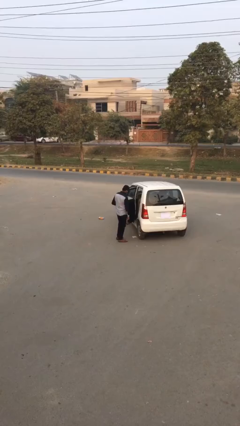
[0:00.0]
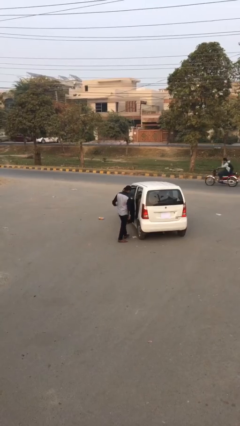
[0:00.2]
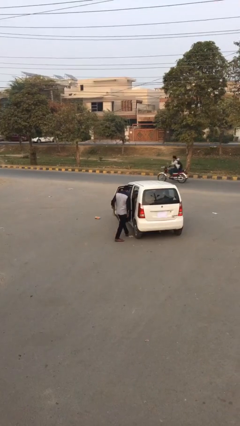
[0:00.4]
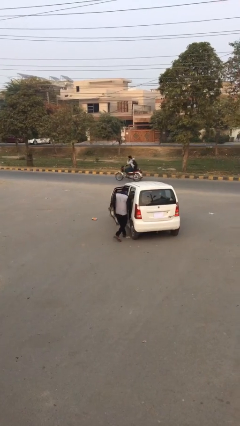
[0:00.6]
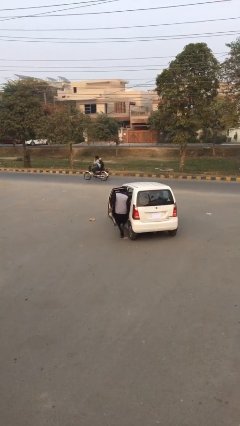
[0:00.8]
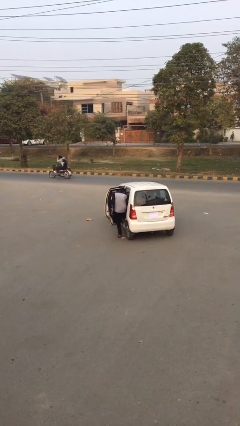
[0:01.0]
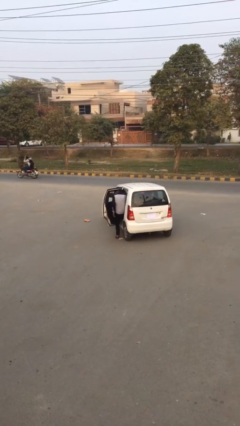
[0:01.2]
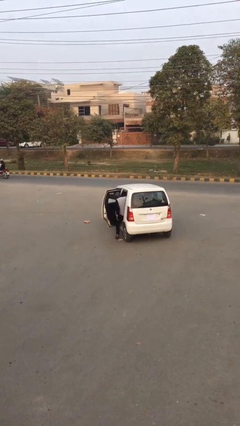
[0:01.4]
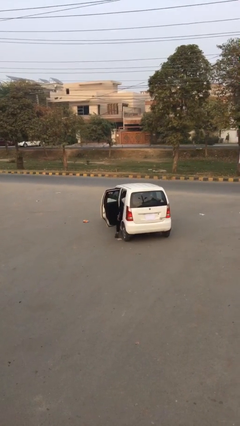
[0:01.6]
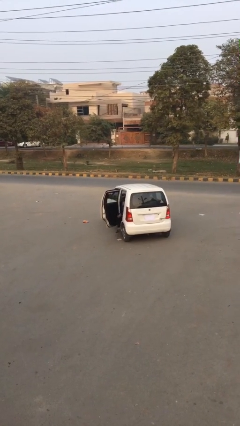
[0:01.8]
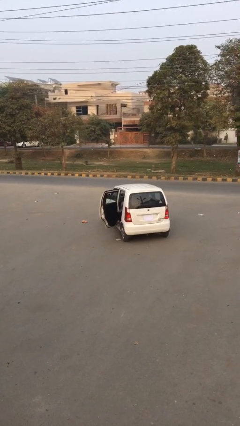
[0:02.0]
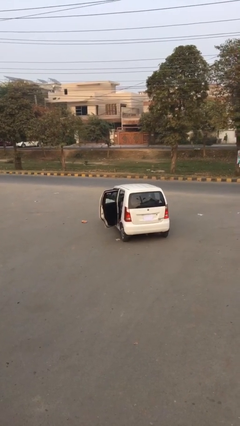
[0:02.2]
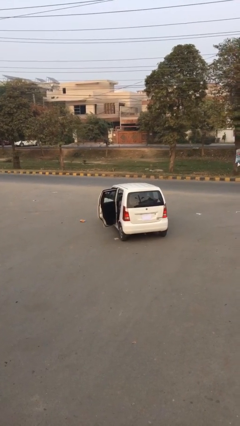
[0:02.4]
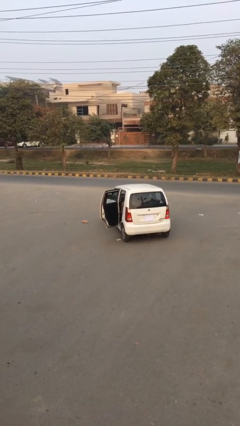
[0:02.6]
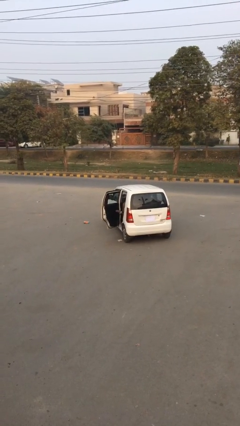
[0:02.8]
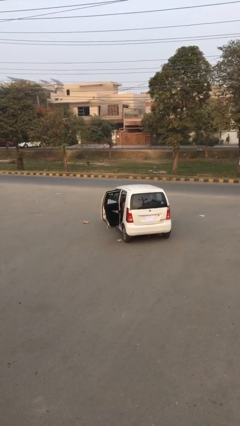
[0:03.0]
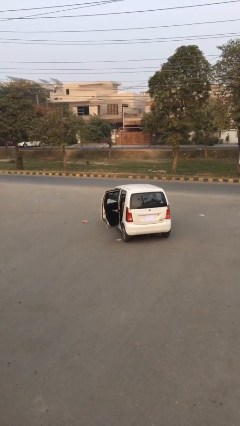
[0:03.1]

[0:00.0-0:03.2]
person enters car

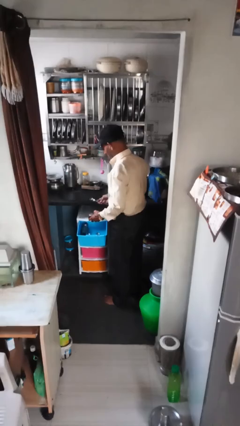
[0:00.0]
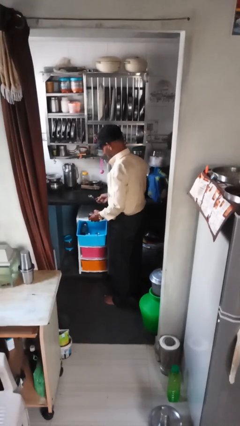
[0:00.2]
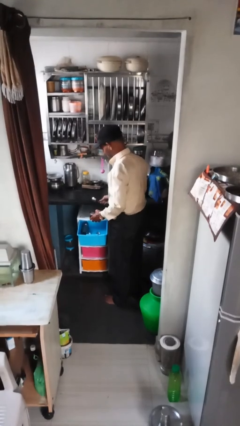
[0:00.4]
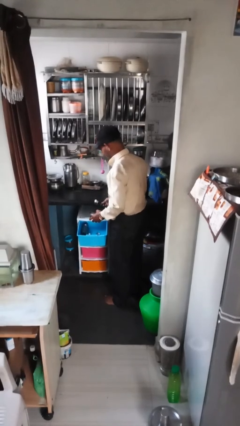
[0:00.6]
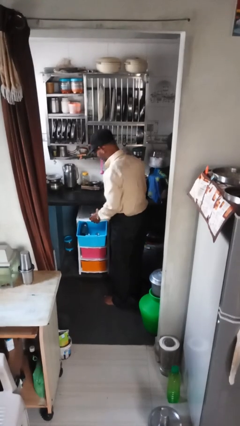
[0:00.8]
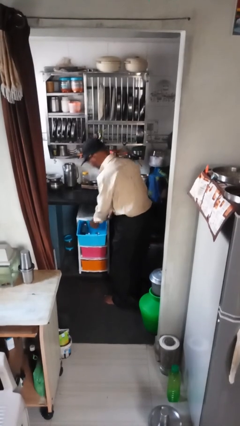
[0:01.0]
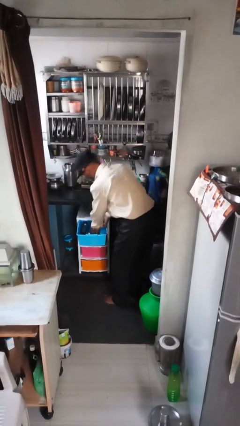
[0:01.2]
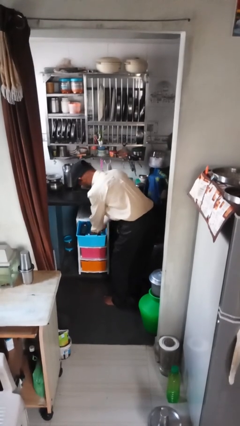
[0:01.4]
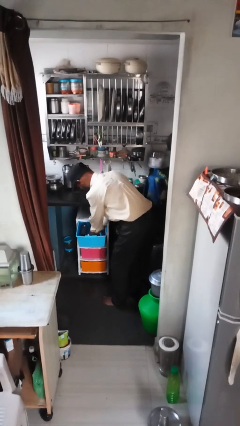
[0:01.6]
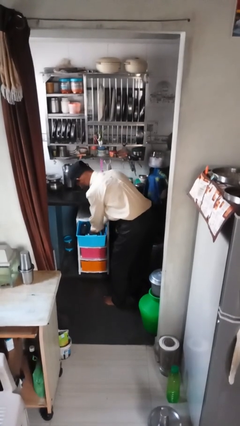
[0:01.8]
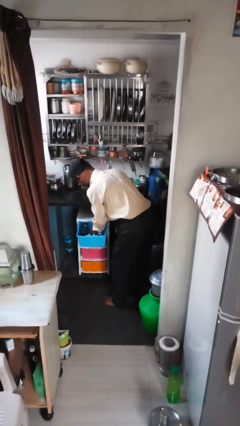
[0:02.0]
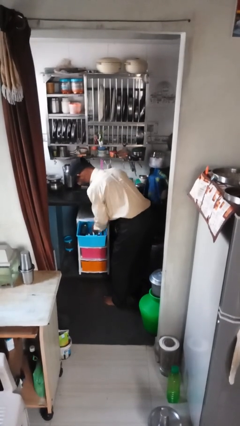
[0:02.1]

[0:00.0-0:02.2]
person puts object into kitchen drawer

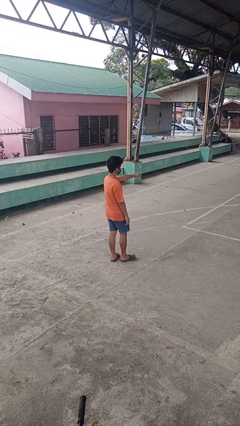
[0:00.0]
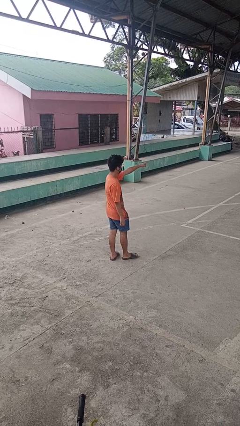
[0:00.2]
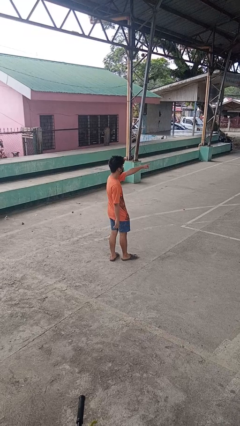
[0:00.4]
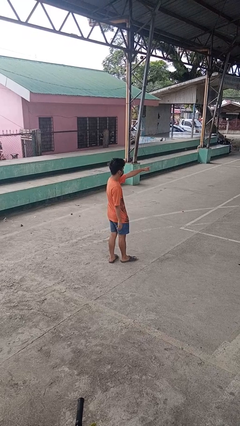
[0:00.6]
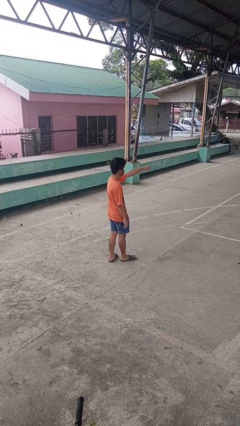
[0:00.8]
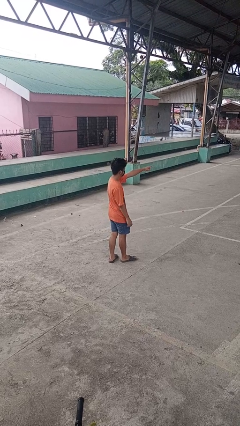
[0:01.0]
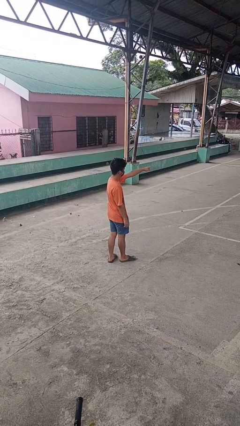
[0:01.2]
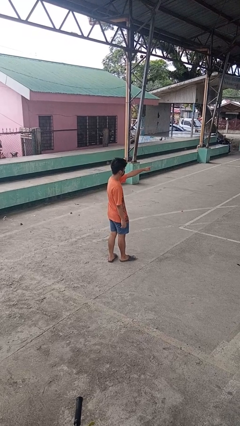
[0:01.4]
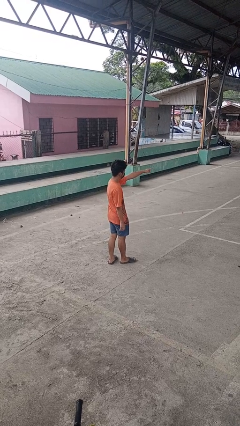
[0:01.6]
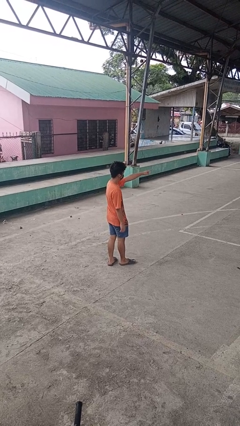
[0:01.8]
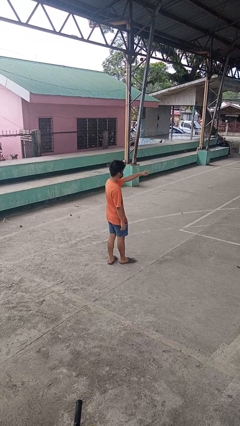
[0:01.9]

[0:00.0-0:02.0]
person points at person

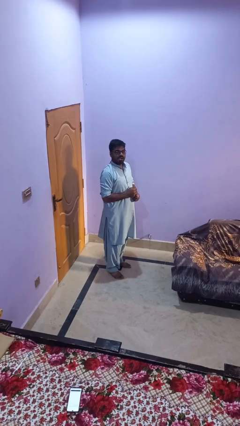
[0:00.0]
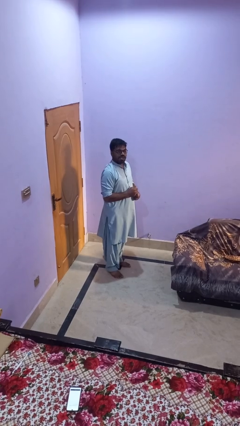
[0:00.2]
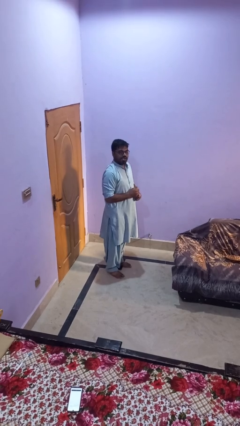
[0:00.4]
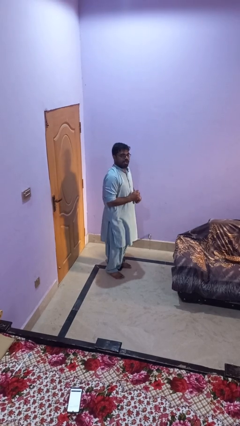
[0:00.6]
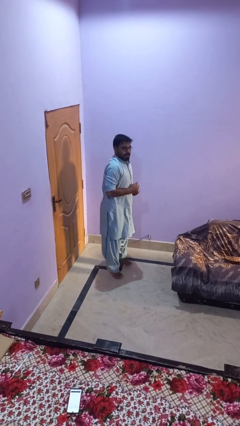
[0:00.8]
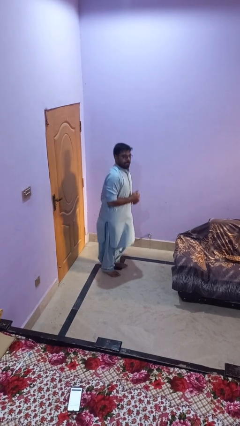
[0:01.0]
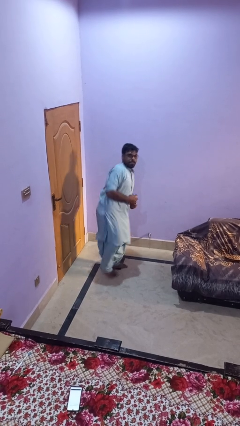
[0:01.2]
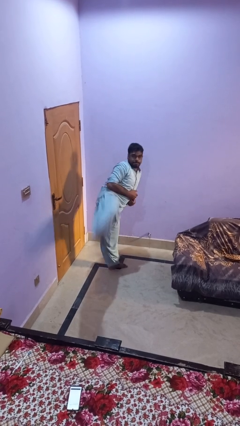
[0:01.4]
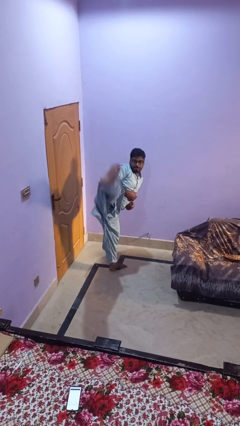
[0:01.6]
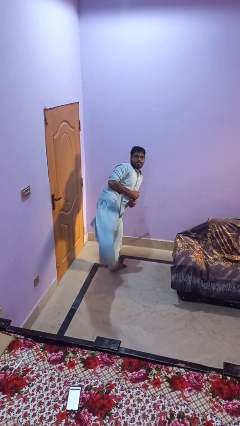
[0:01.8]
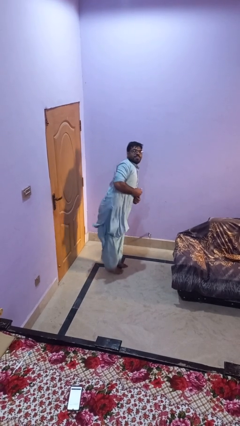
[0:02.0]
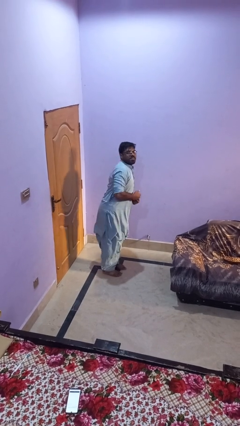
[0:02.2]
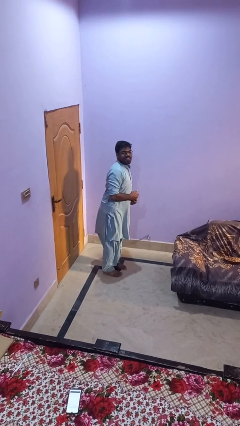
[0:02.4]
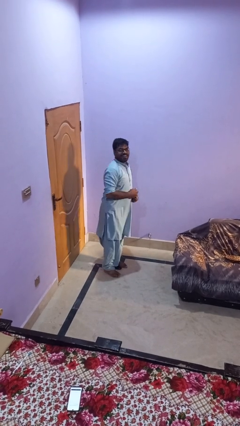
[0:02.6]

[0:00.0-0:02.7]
person karate kicks

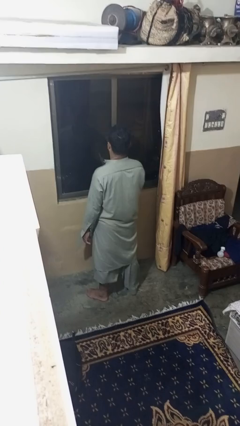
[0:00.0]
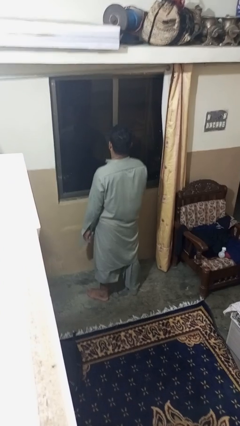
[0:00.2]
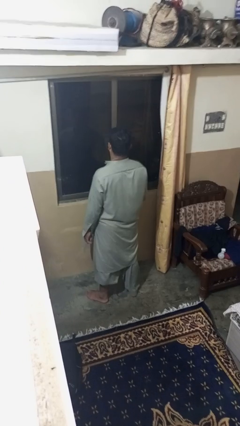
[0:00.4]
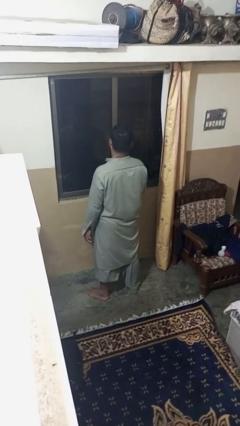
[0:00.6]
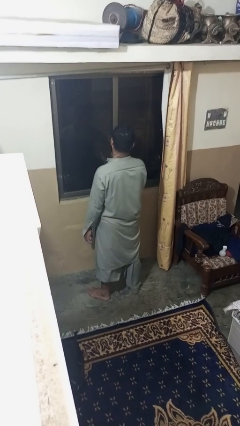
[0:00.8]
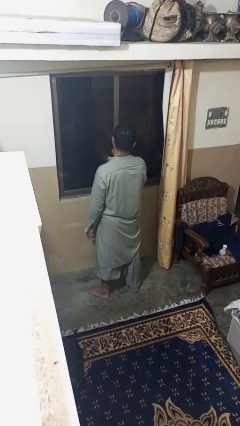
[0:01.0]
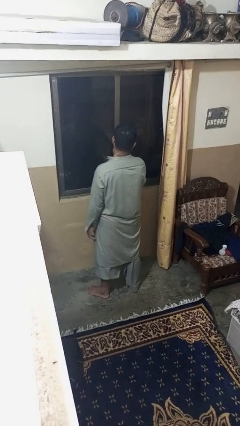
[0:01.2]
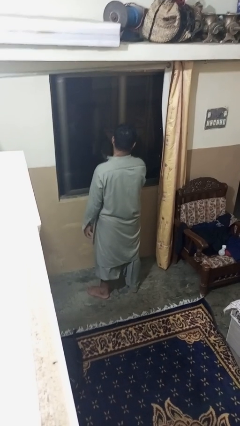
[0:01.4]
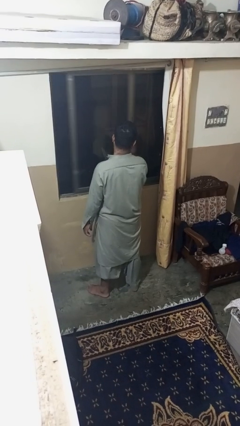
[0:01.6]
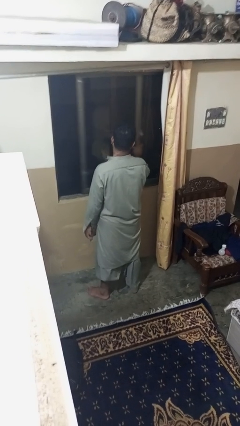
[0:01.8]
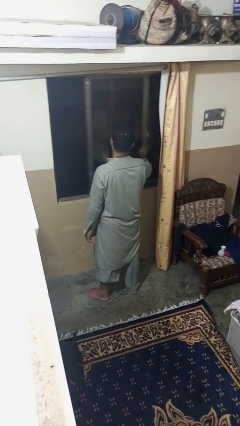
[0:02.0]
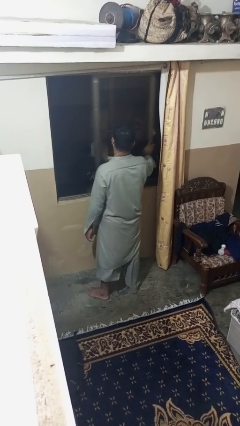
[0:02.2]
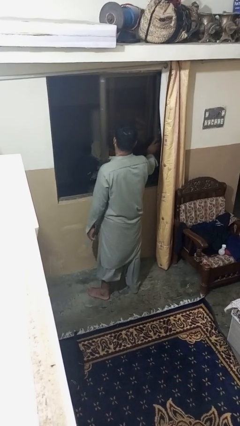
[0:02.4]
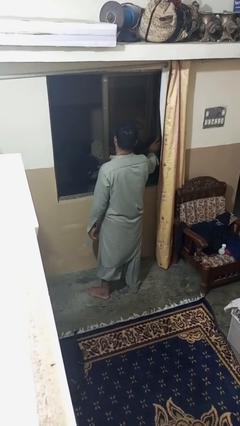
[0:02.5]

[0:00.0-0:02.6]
person opens home window

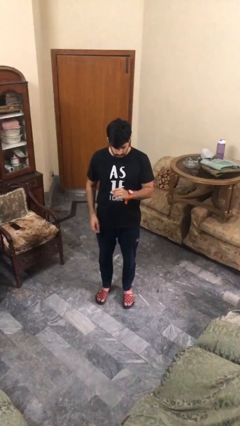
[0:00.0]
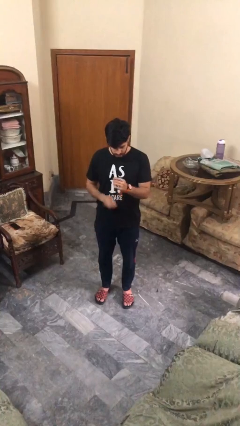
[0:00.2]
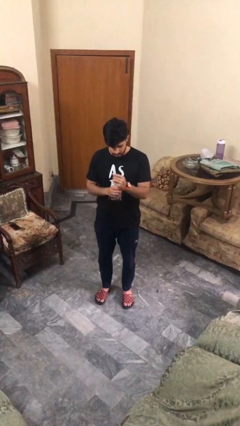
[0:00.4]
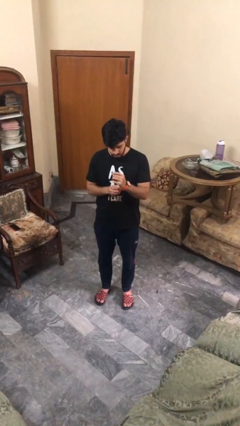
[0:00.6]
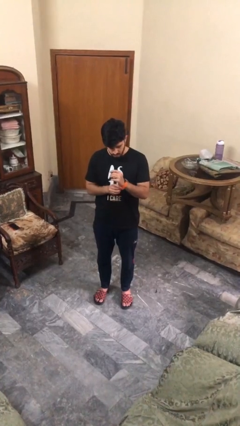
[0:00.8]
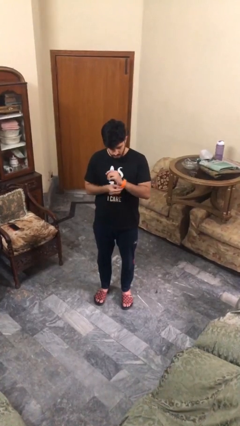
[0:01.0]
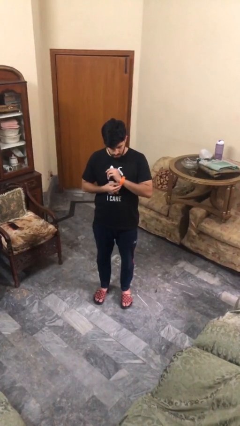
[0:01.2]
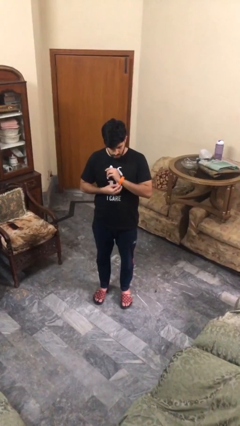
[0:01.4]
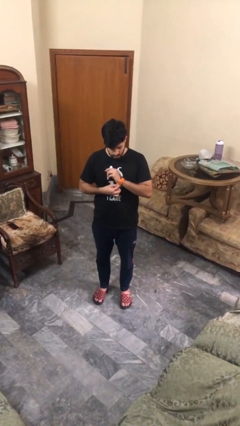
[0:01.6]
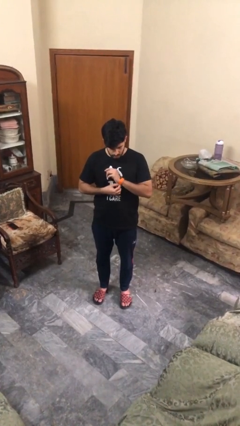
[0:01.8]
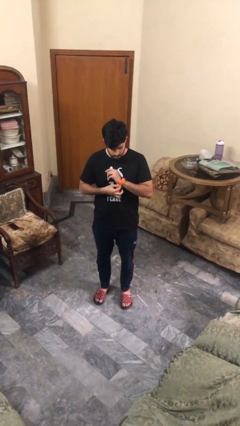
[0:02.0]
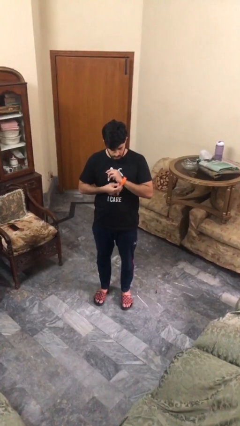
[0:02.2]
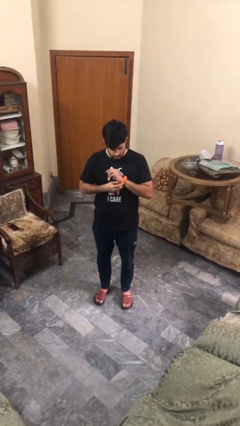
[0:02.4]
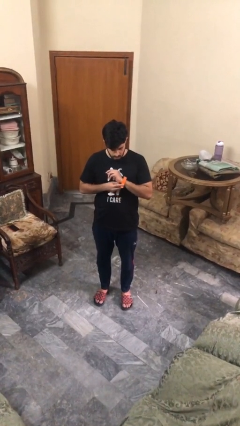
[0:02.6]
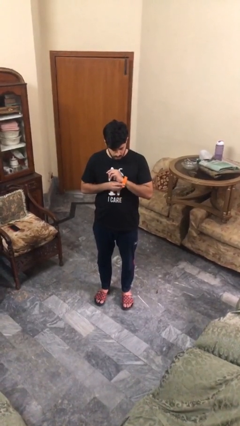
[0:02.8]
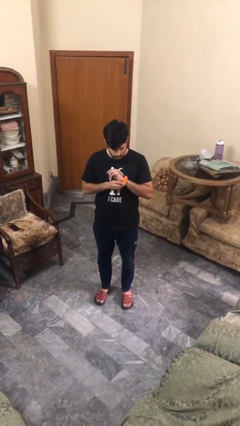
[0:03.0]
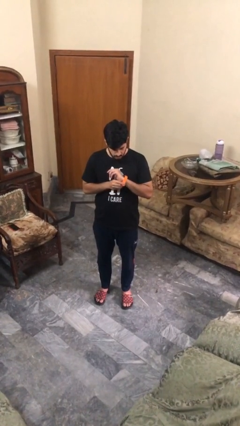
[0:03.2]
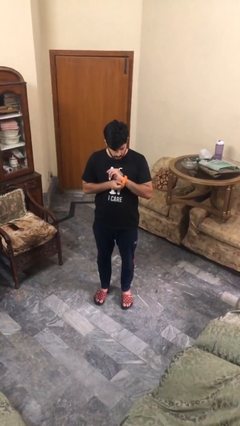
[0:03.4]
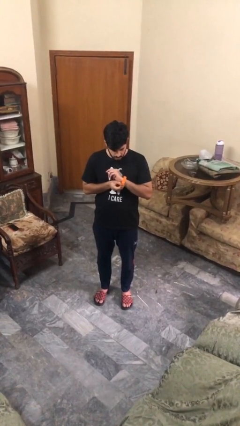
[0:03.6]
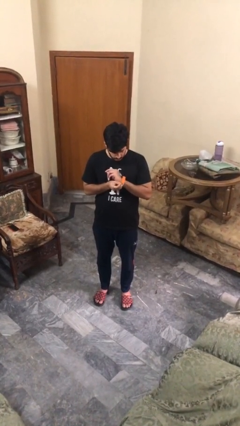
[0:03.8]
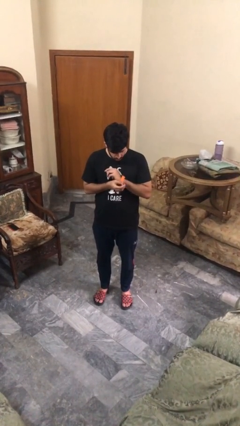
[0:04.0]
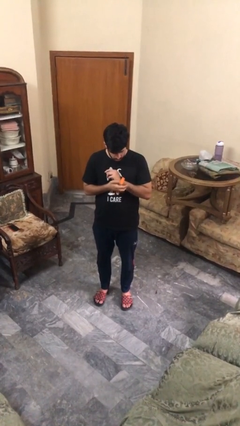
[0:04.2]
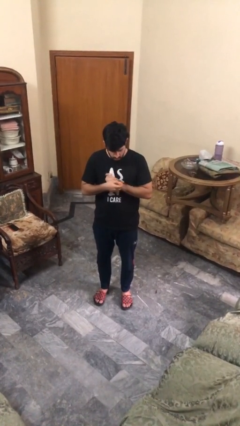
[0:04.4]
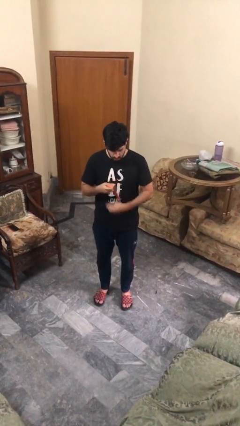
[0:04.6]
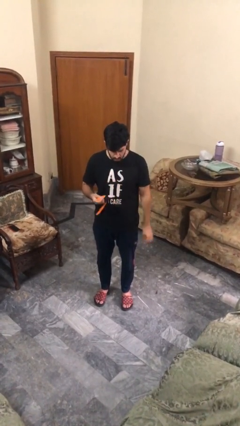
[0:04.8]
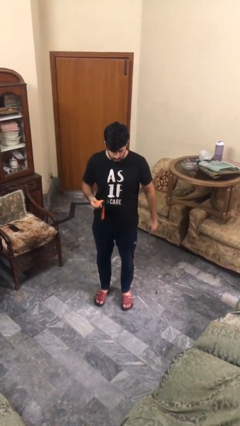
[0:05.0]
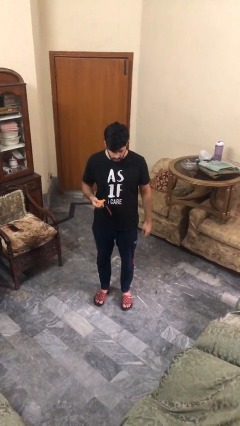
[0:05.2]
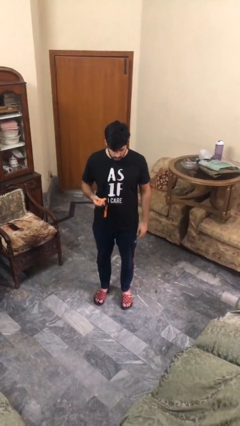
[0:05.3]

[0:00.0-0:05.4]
person takes off wristwatch
